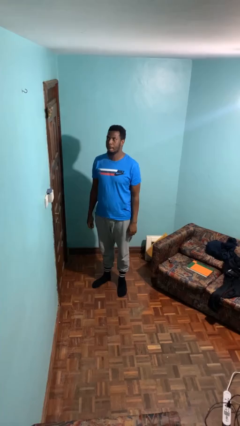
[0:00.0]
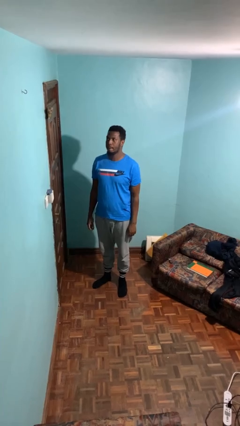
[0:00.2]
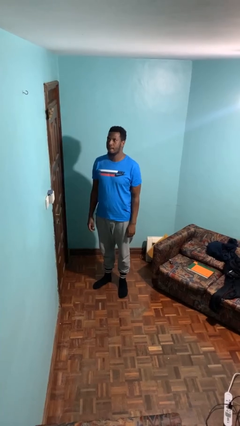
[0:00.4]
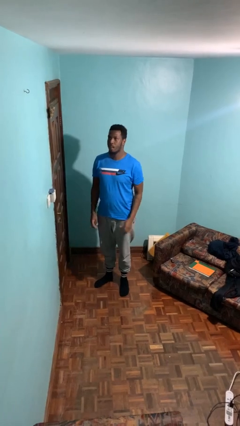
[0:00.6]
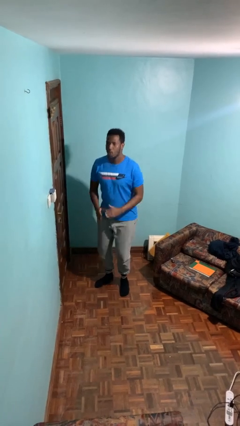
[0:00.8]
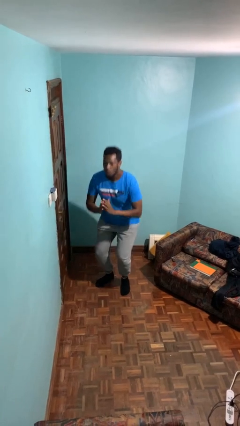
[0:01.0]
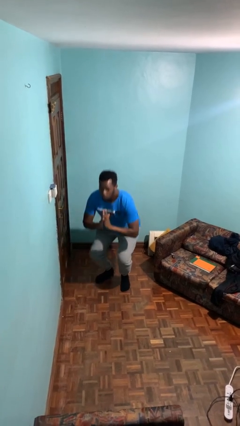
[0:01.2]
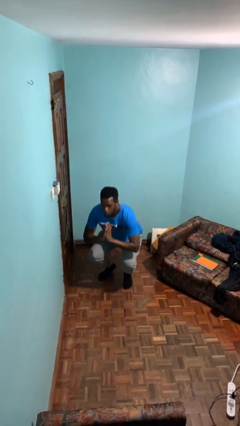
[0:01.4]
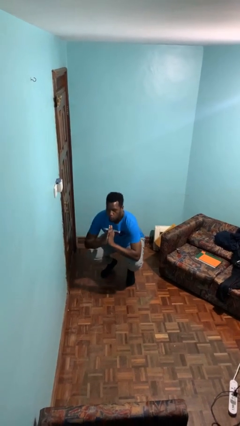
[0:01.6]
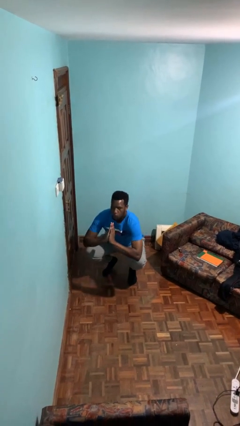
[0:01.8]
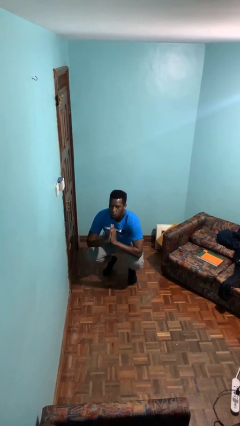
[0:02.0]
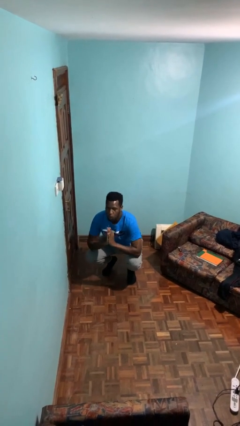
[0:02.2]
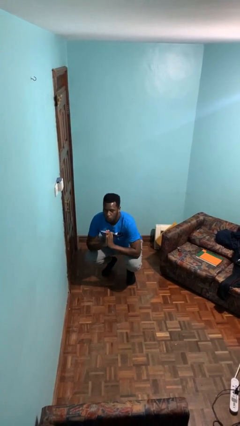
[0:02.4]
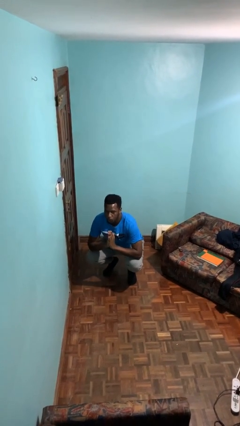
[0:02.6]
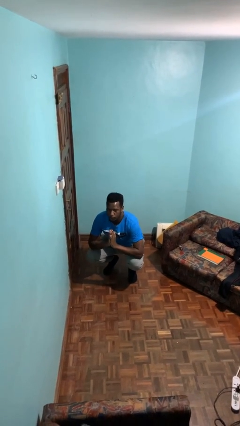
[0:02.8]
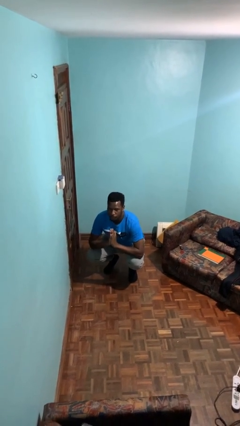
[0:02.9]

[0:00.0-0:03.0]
person squats

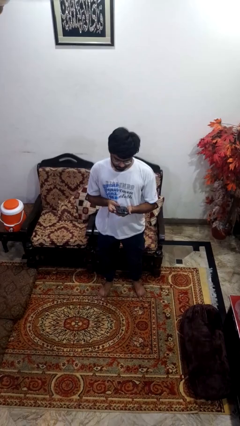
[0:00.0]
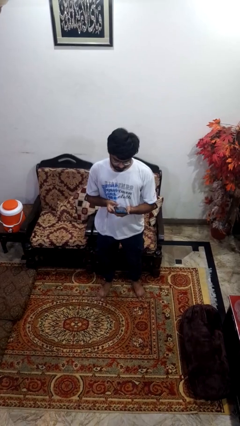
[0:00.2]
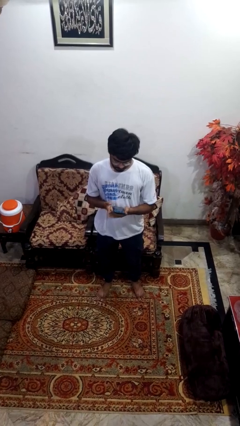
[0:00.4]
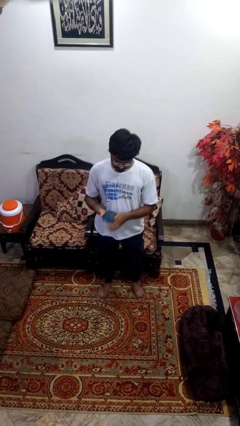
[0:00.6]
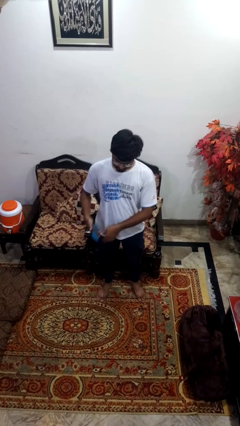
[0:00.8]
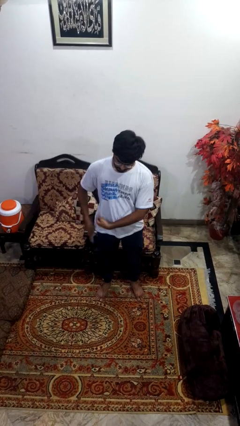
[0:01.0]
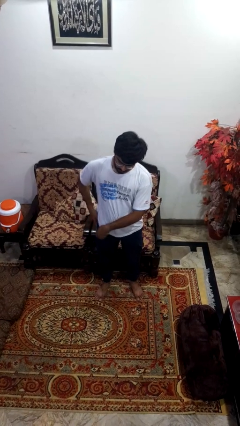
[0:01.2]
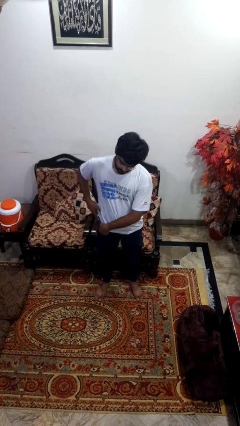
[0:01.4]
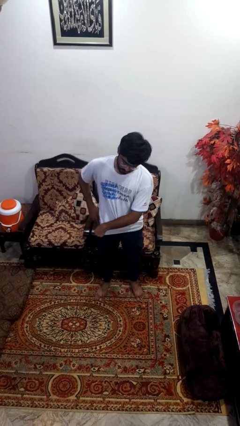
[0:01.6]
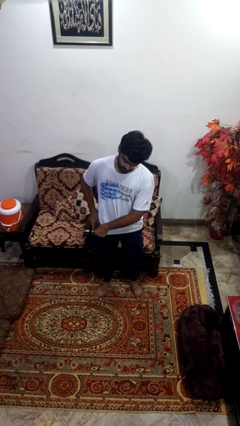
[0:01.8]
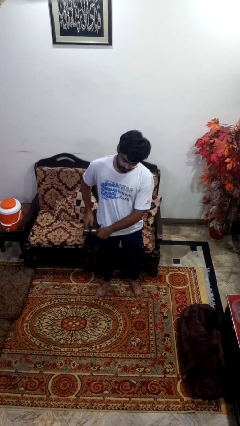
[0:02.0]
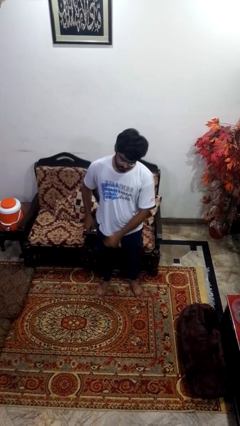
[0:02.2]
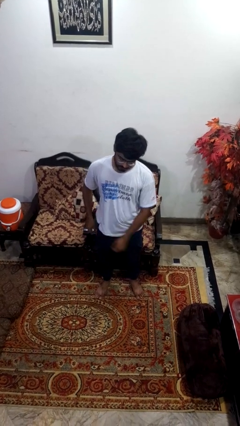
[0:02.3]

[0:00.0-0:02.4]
person puts phone into pocket

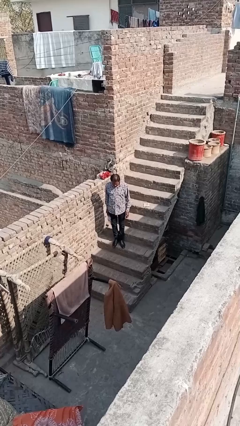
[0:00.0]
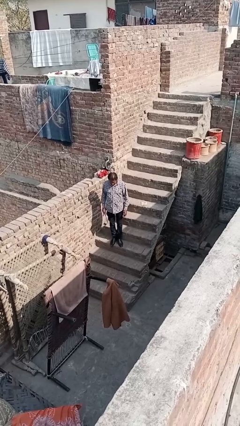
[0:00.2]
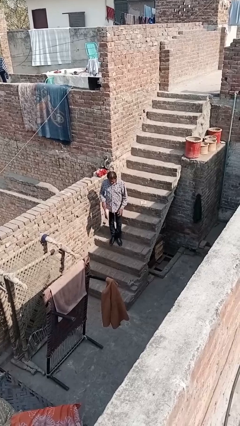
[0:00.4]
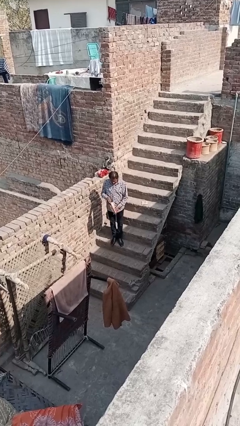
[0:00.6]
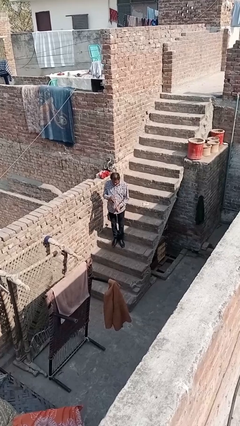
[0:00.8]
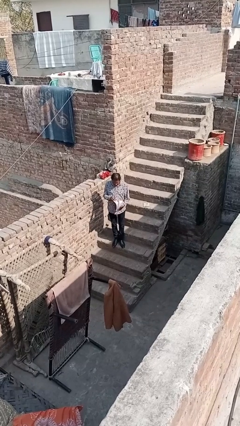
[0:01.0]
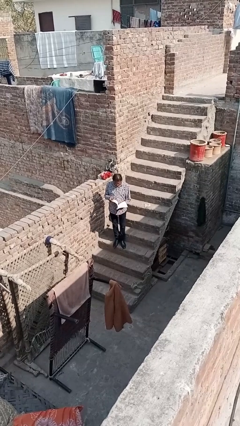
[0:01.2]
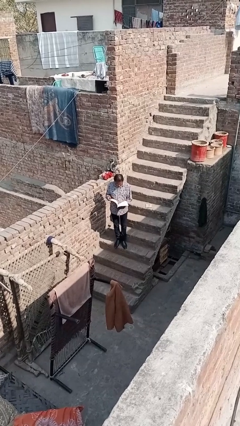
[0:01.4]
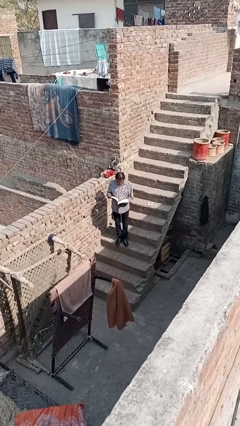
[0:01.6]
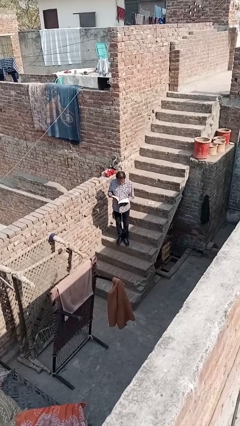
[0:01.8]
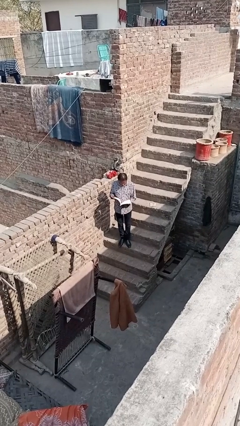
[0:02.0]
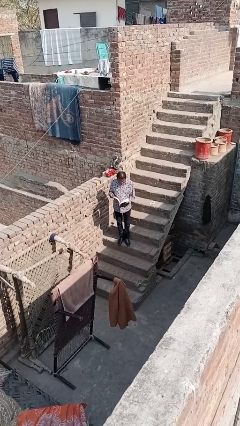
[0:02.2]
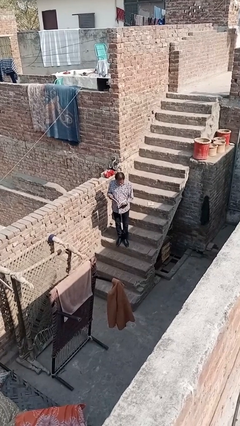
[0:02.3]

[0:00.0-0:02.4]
person reads document

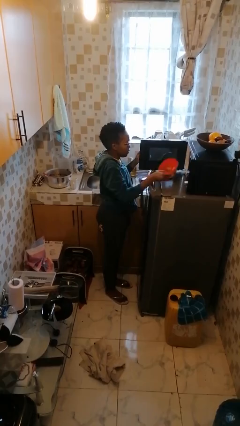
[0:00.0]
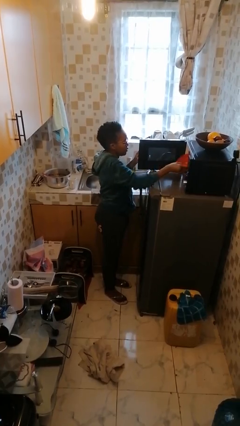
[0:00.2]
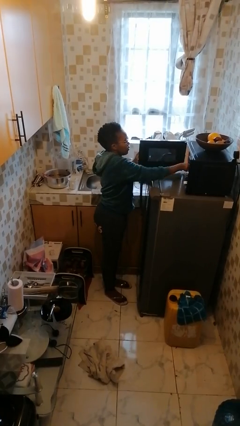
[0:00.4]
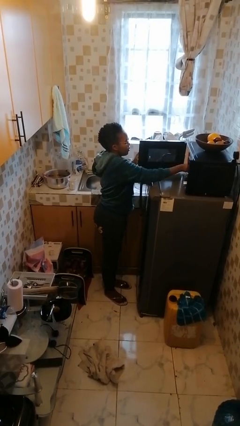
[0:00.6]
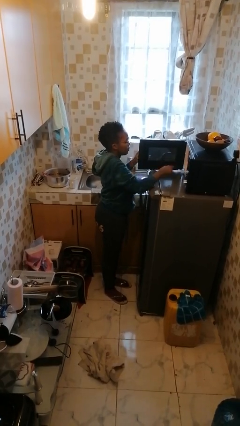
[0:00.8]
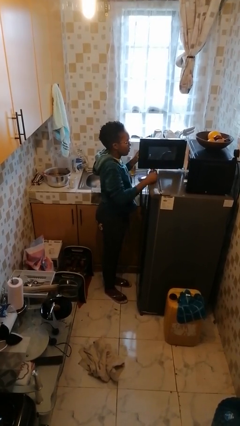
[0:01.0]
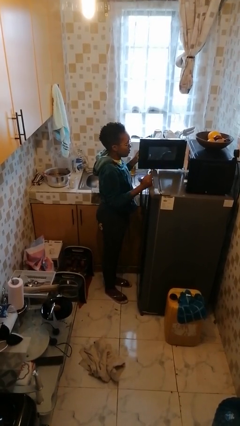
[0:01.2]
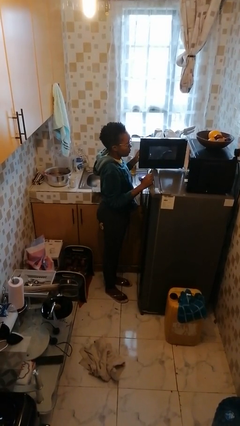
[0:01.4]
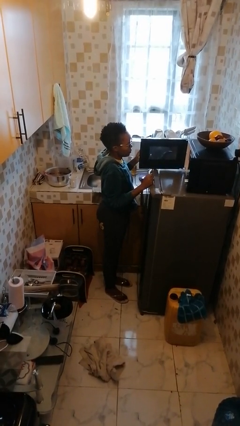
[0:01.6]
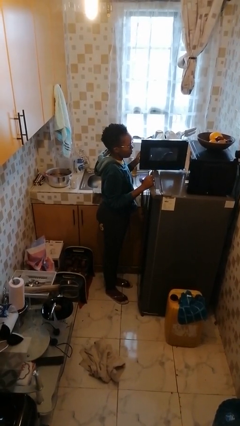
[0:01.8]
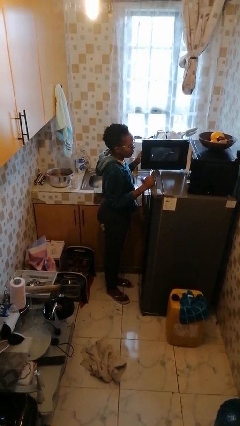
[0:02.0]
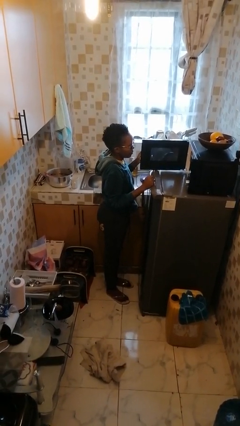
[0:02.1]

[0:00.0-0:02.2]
person puts object into microwave

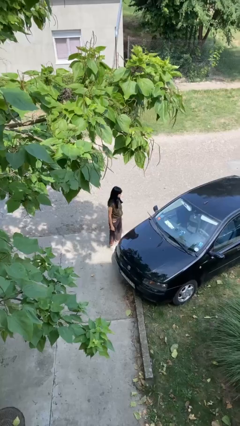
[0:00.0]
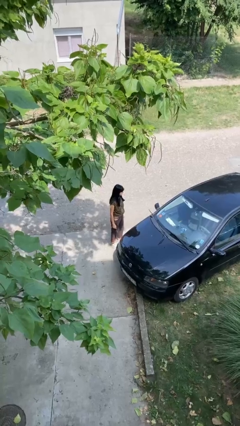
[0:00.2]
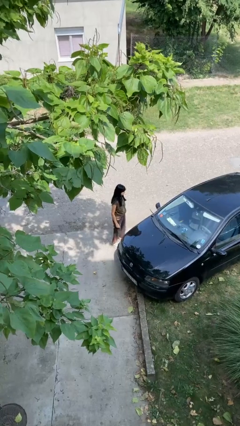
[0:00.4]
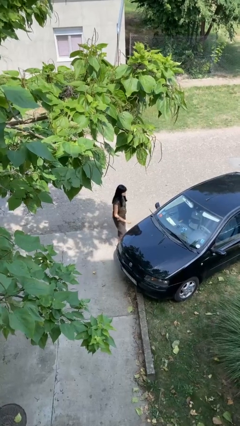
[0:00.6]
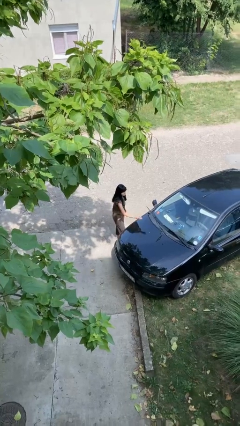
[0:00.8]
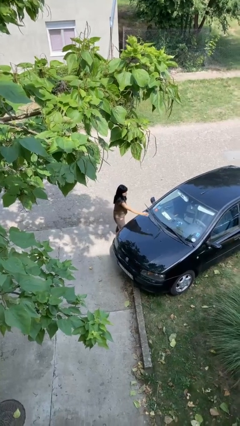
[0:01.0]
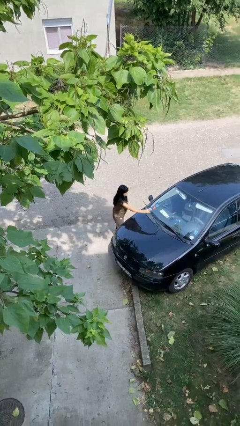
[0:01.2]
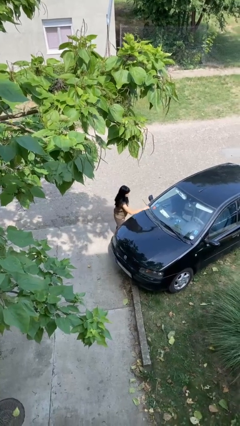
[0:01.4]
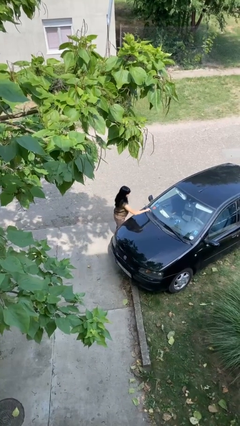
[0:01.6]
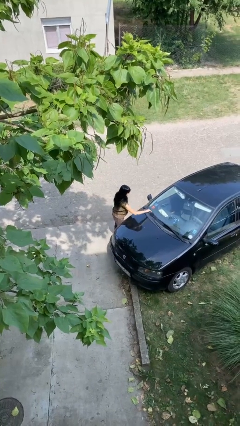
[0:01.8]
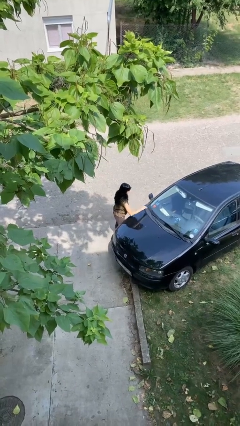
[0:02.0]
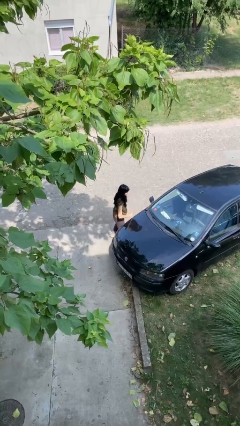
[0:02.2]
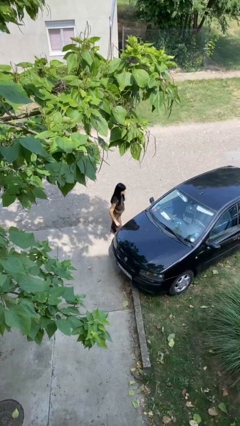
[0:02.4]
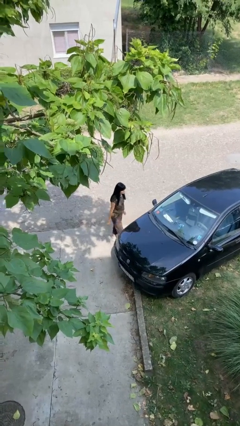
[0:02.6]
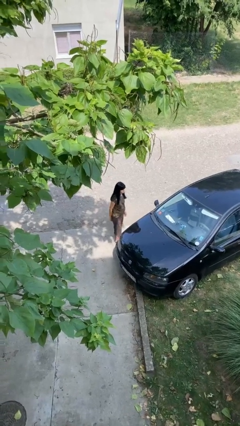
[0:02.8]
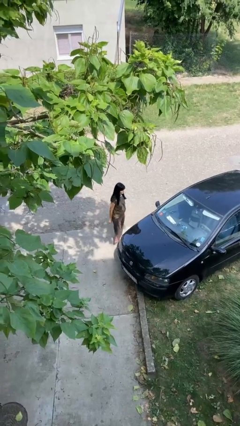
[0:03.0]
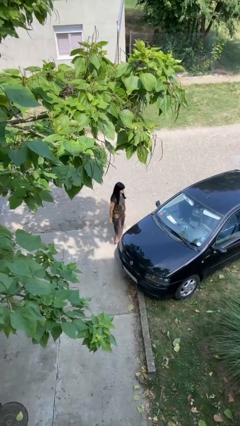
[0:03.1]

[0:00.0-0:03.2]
person flips down car wipers

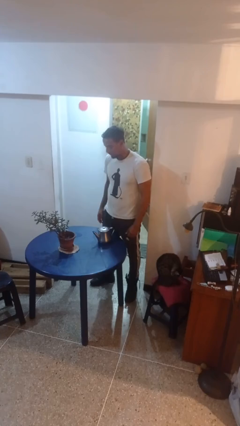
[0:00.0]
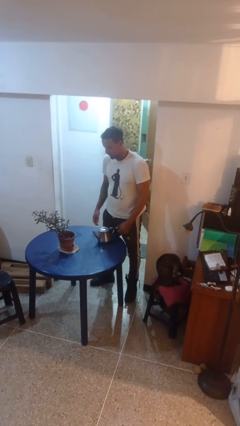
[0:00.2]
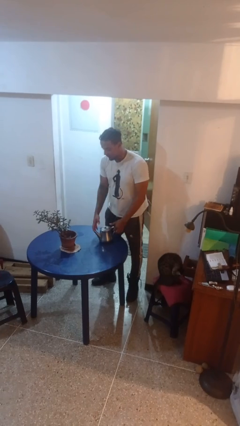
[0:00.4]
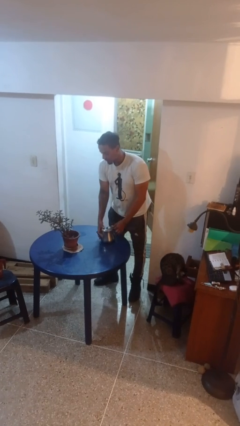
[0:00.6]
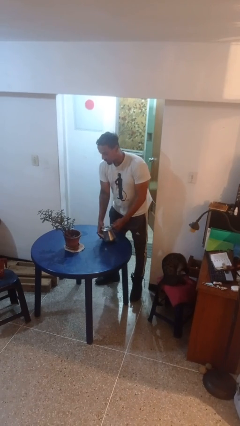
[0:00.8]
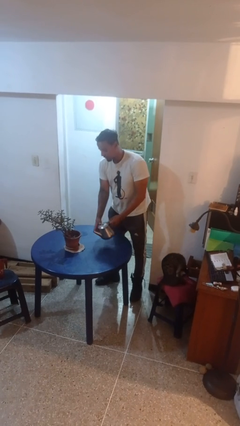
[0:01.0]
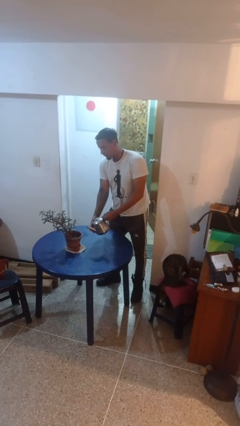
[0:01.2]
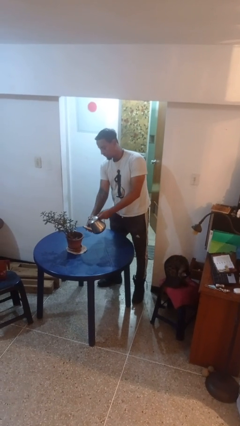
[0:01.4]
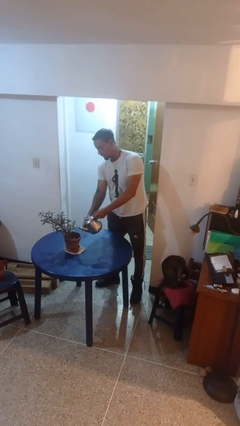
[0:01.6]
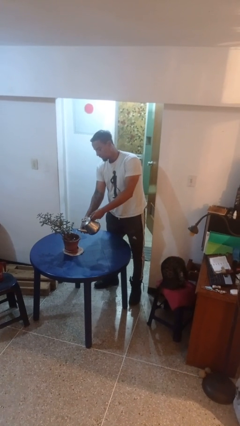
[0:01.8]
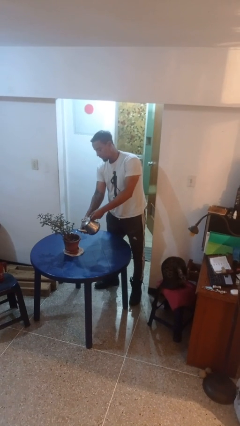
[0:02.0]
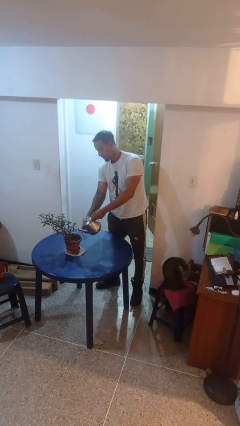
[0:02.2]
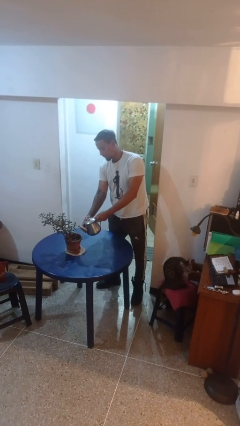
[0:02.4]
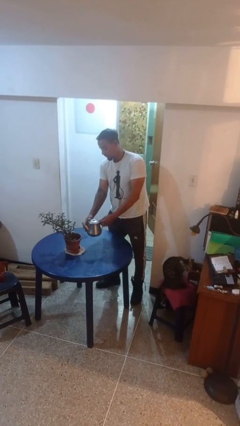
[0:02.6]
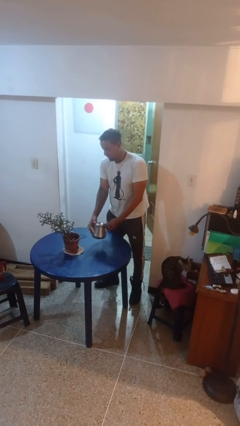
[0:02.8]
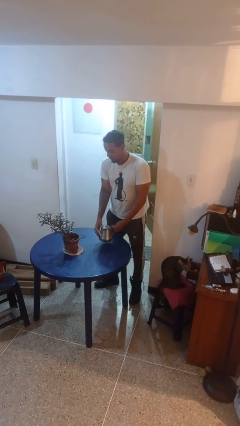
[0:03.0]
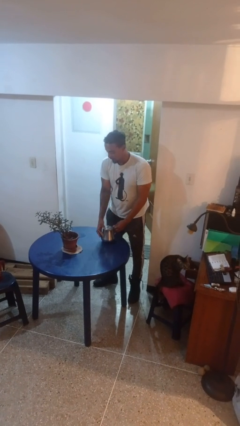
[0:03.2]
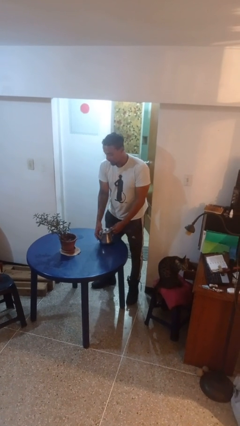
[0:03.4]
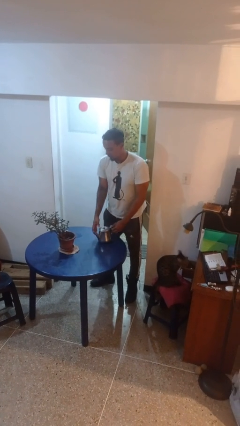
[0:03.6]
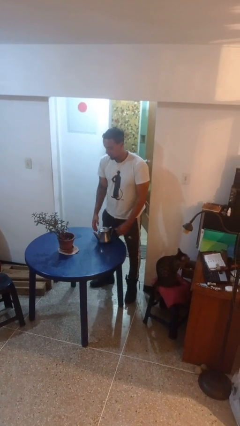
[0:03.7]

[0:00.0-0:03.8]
person waters houseplant

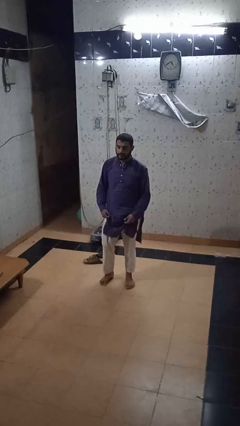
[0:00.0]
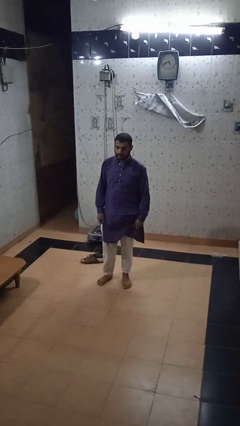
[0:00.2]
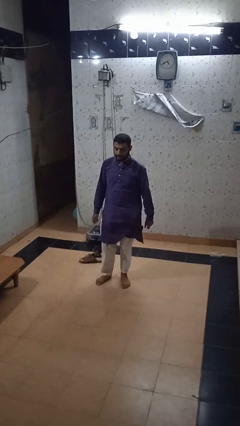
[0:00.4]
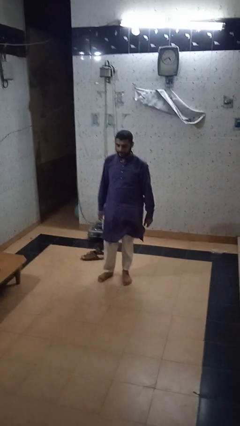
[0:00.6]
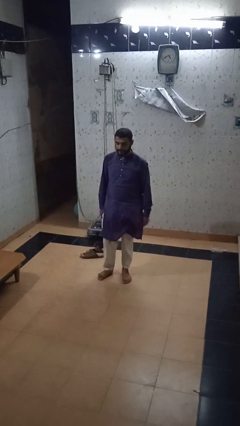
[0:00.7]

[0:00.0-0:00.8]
person stands up from floor
